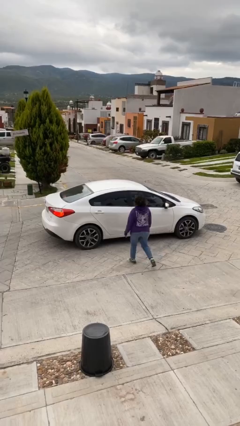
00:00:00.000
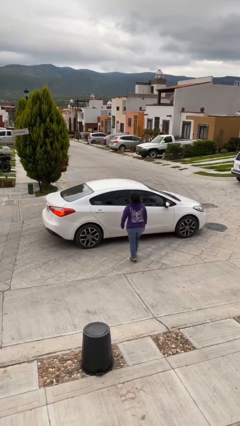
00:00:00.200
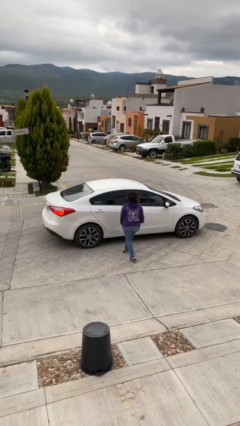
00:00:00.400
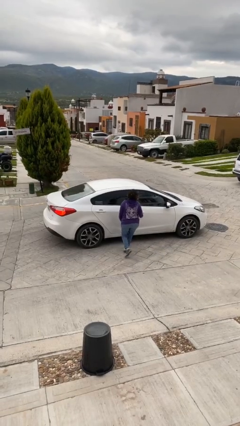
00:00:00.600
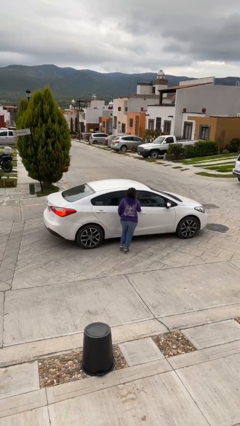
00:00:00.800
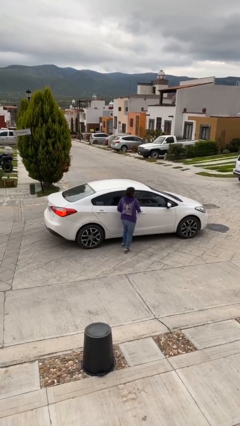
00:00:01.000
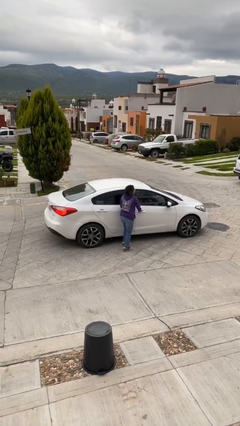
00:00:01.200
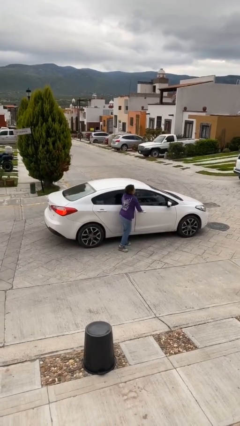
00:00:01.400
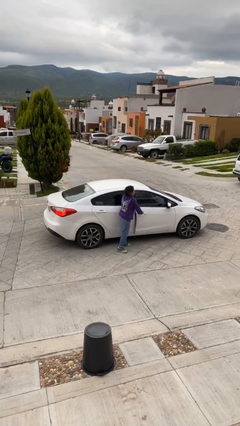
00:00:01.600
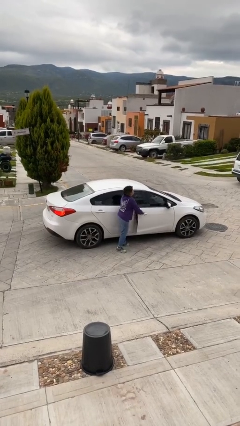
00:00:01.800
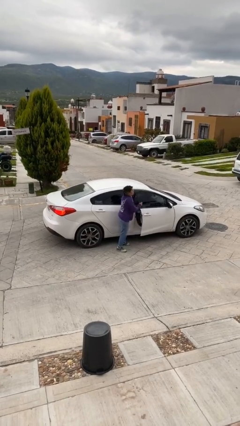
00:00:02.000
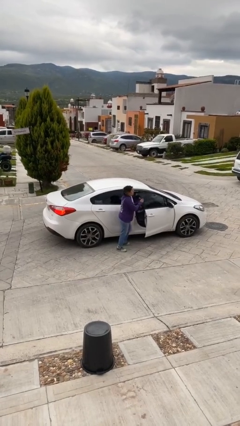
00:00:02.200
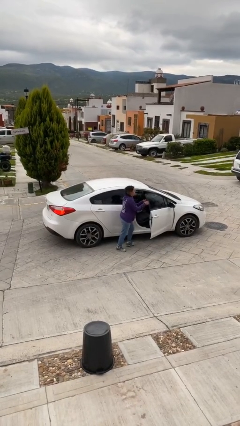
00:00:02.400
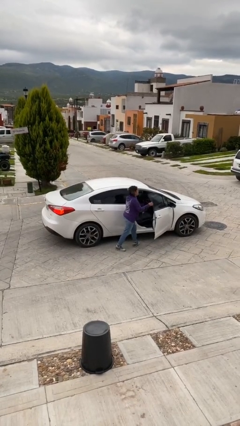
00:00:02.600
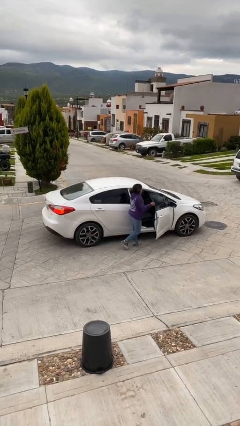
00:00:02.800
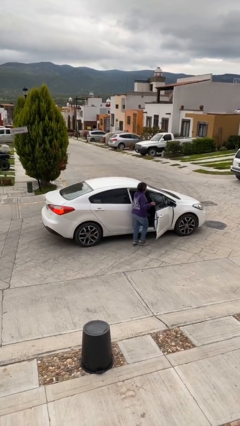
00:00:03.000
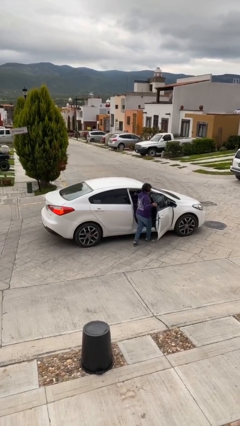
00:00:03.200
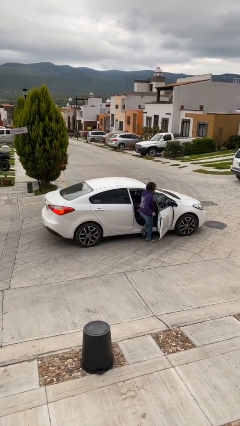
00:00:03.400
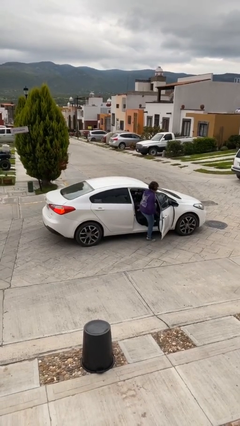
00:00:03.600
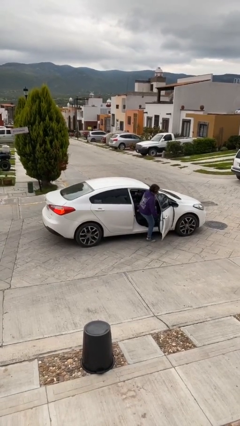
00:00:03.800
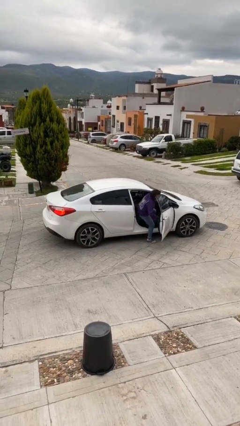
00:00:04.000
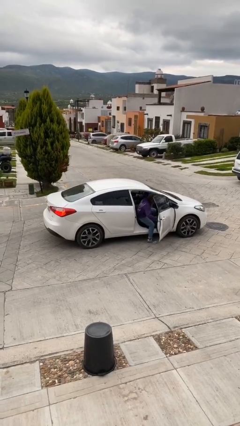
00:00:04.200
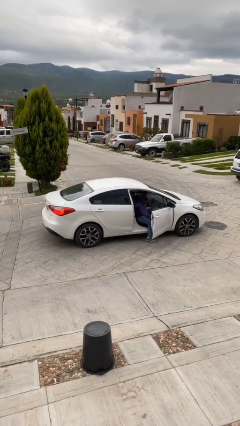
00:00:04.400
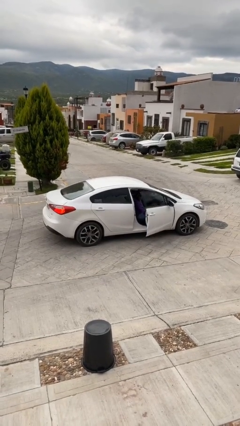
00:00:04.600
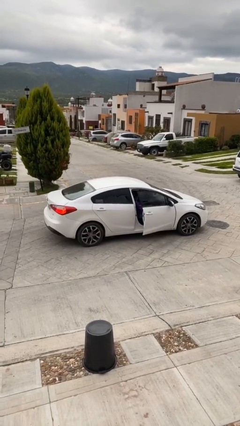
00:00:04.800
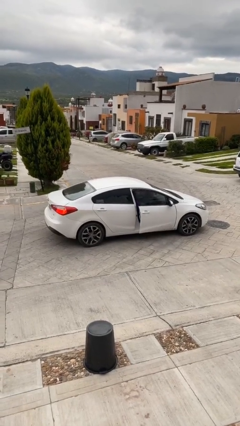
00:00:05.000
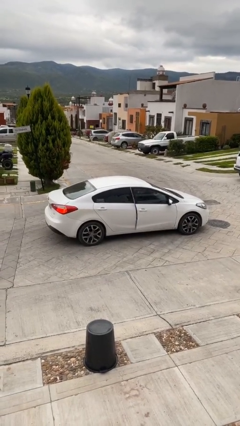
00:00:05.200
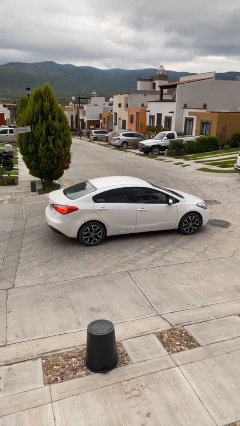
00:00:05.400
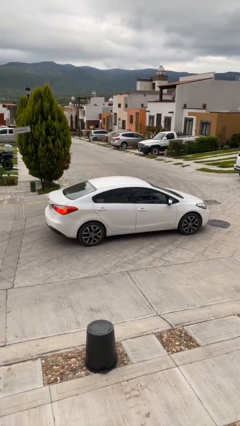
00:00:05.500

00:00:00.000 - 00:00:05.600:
car picks up person

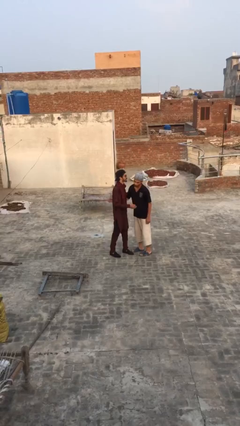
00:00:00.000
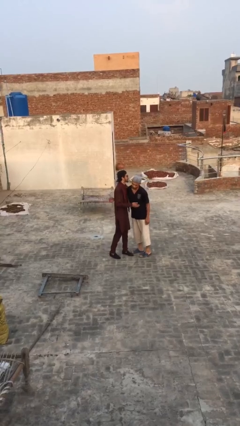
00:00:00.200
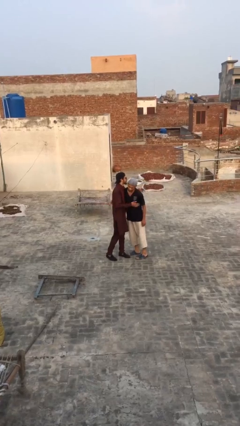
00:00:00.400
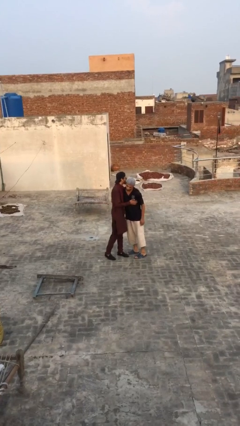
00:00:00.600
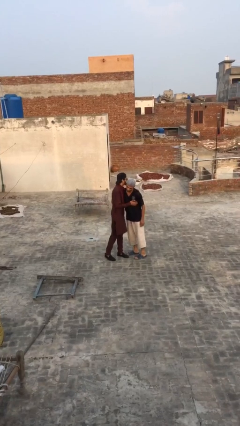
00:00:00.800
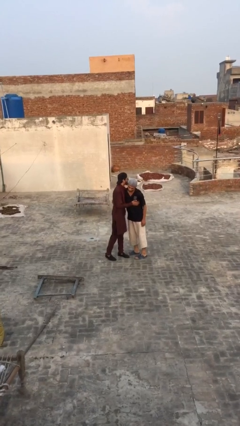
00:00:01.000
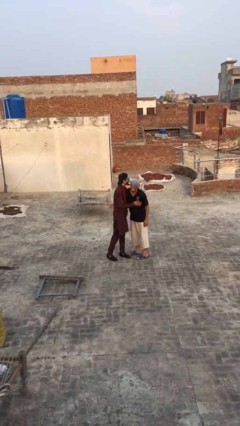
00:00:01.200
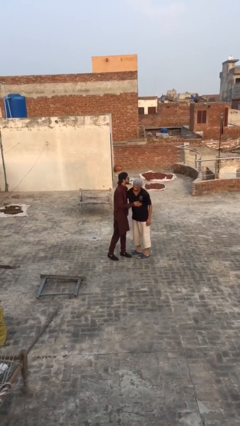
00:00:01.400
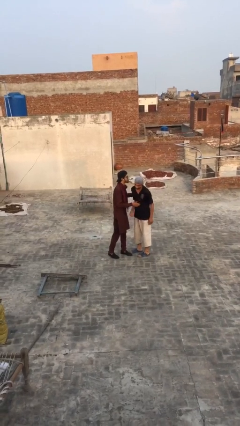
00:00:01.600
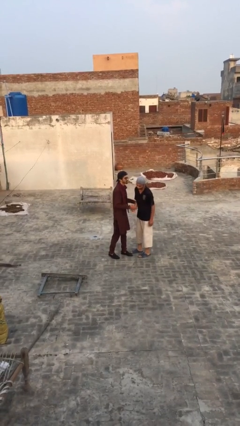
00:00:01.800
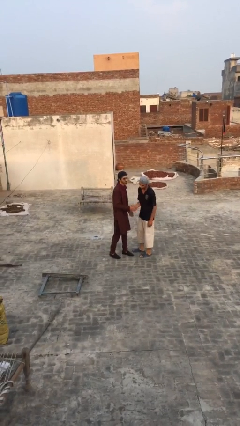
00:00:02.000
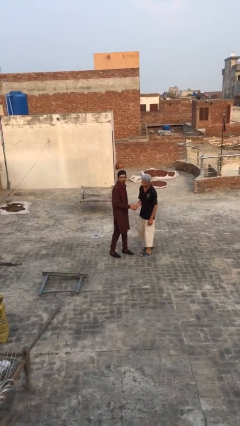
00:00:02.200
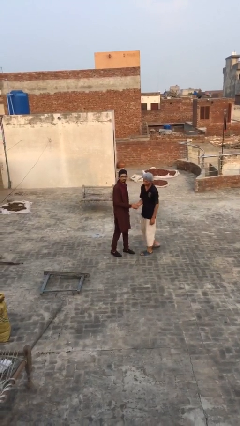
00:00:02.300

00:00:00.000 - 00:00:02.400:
person embraces person

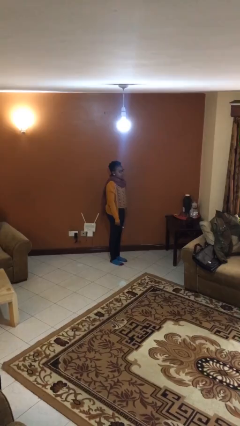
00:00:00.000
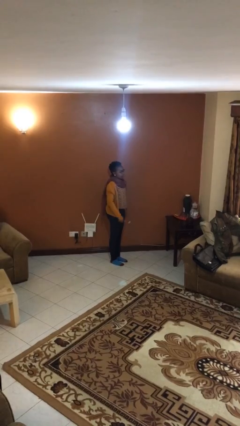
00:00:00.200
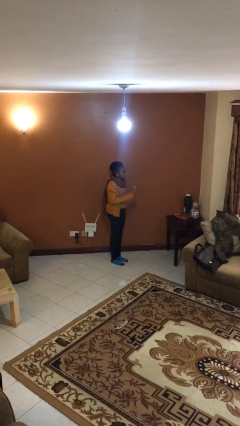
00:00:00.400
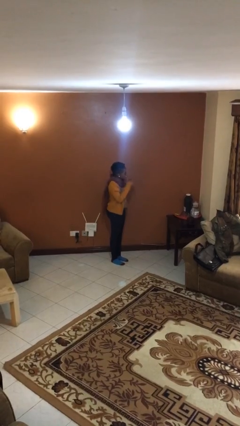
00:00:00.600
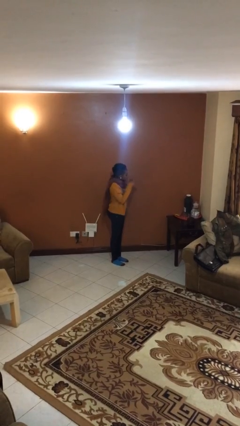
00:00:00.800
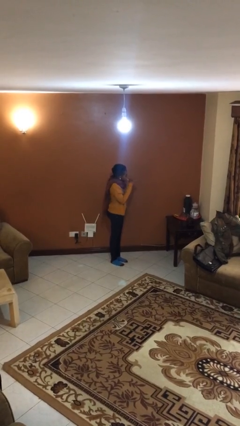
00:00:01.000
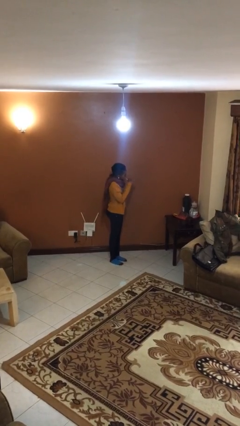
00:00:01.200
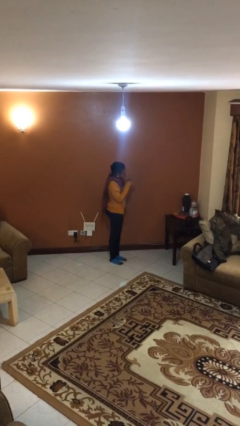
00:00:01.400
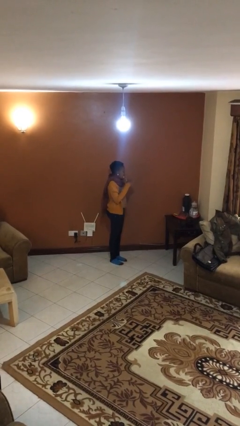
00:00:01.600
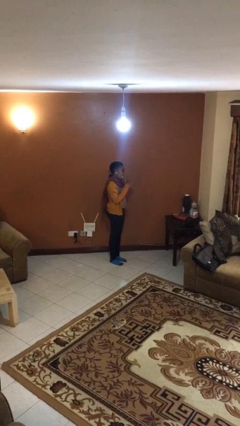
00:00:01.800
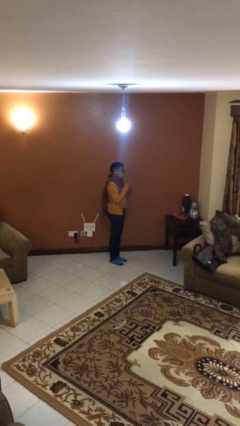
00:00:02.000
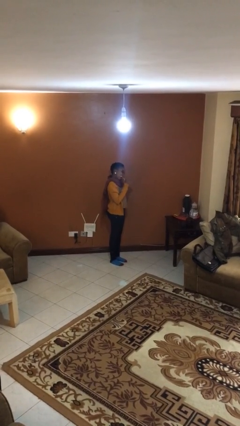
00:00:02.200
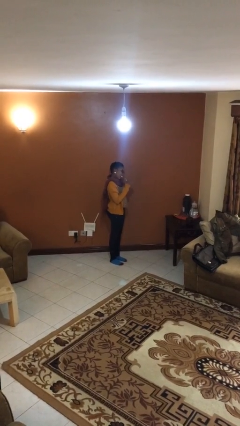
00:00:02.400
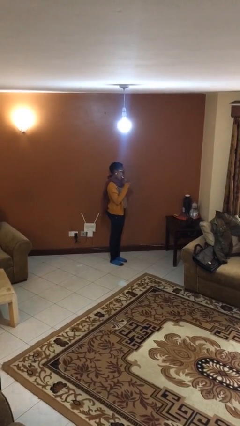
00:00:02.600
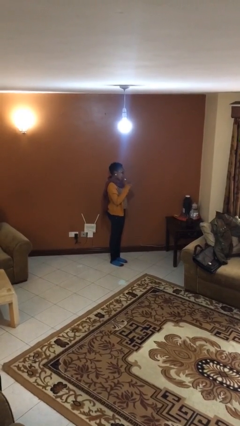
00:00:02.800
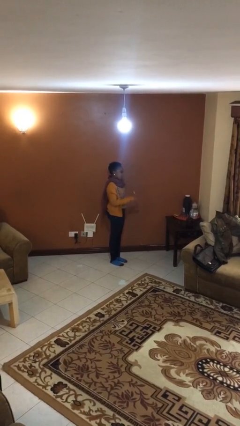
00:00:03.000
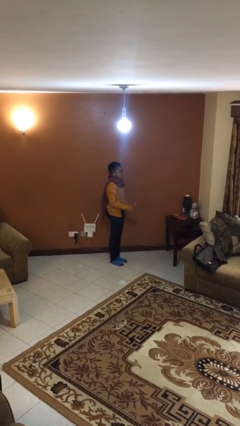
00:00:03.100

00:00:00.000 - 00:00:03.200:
person brushes teeth

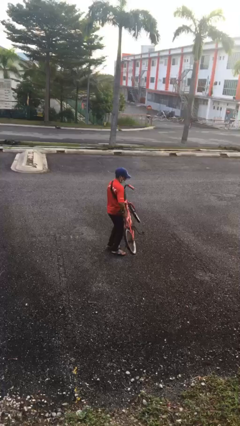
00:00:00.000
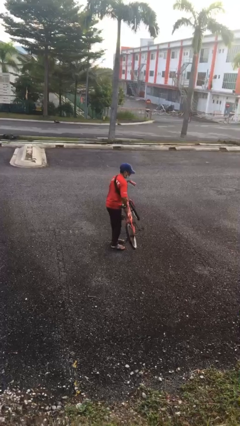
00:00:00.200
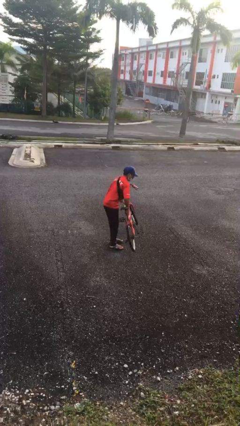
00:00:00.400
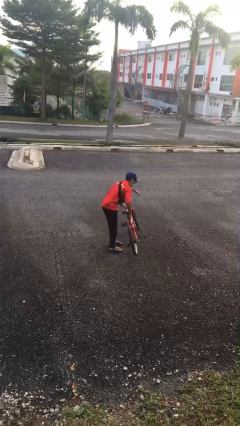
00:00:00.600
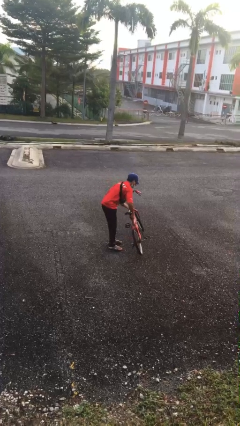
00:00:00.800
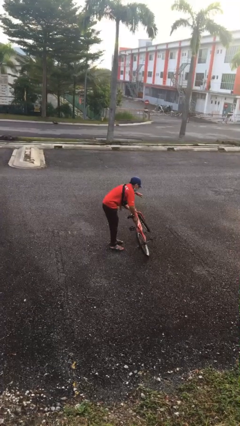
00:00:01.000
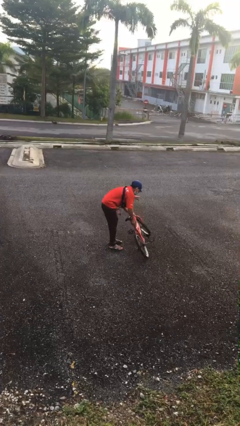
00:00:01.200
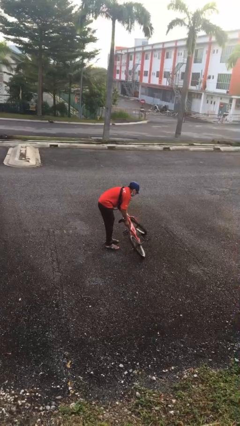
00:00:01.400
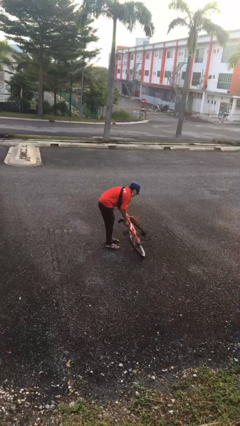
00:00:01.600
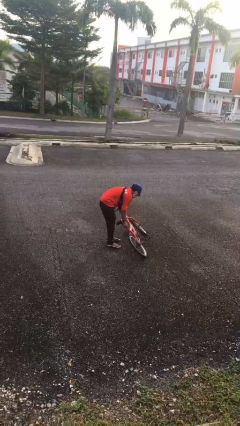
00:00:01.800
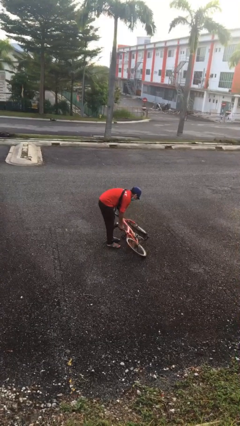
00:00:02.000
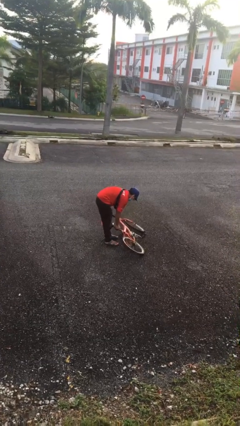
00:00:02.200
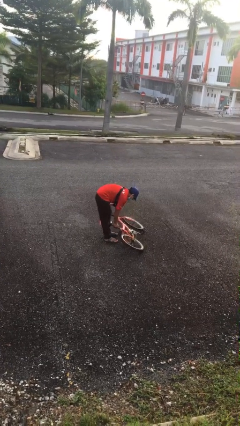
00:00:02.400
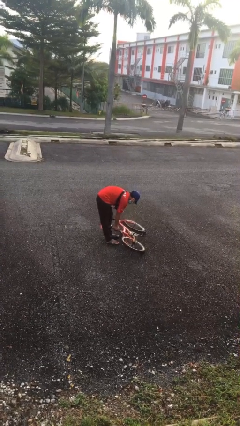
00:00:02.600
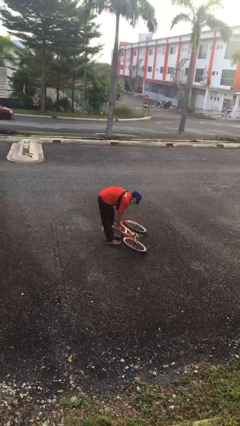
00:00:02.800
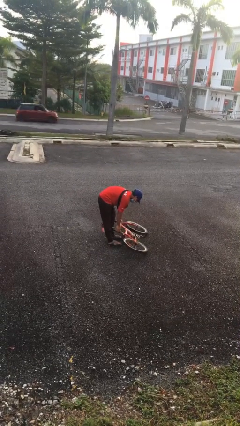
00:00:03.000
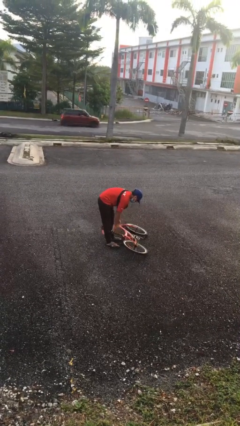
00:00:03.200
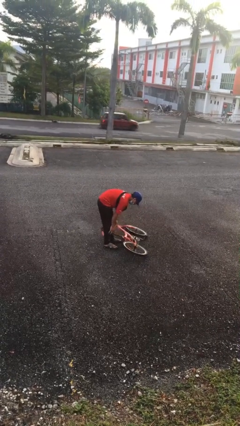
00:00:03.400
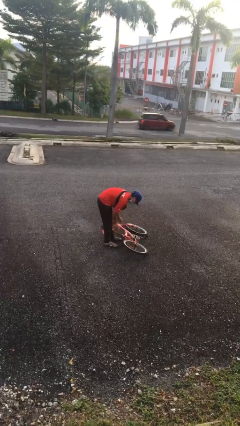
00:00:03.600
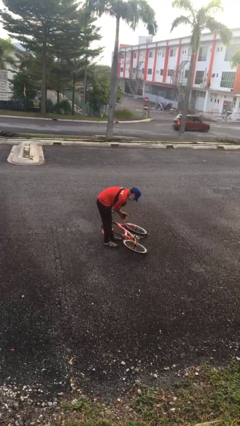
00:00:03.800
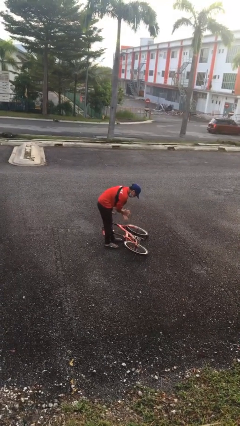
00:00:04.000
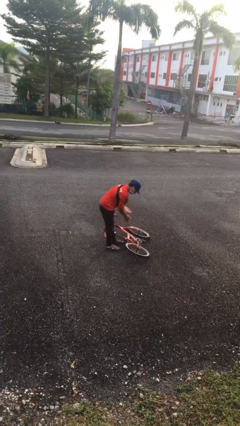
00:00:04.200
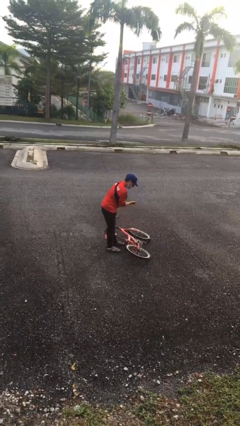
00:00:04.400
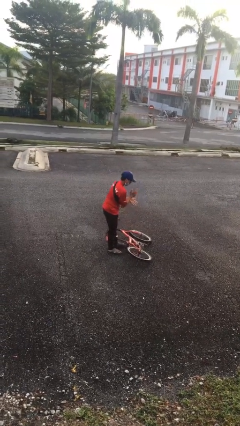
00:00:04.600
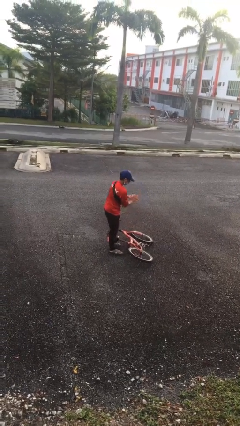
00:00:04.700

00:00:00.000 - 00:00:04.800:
person puts down object on floor

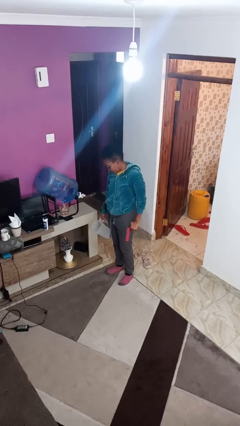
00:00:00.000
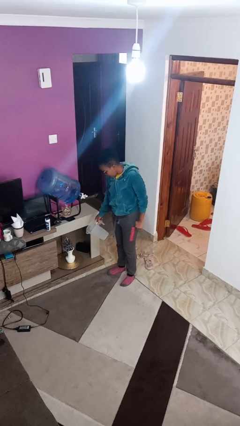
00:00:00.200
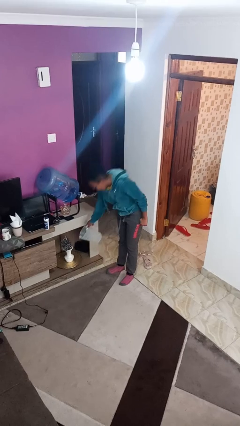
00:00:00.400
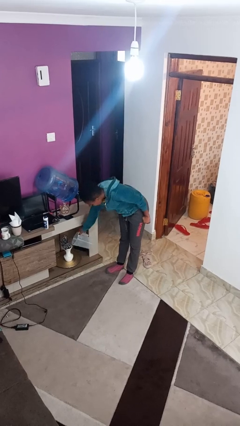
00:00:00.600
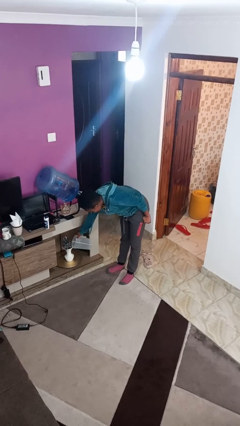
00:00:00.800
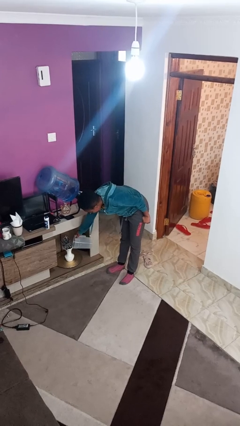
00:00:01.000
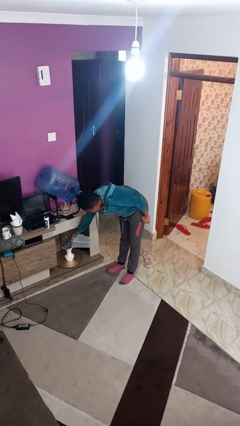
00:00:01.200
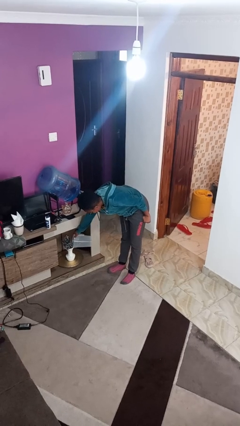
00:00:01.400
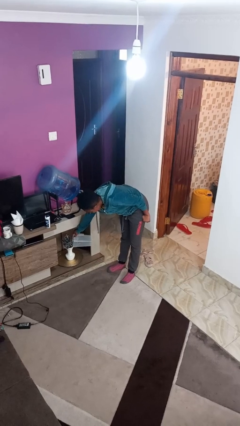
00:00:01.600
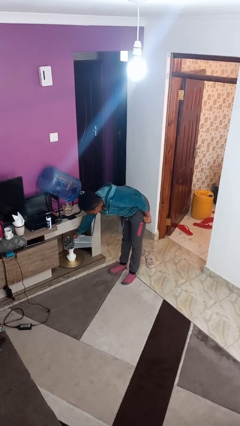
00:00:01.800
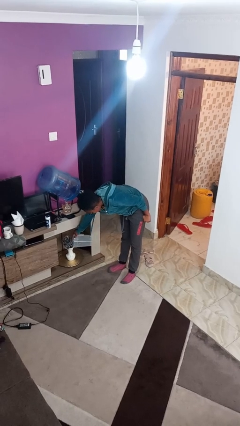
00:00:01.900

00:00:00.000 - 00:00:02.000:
person waters houseplant
